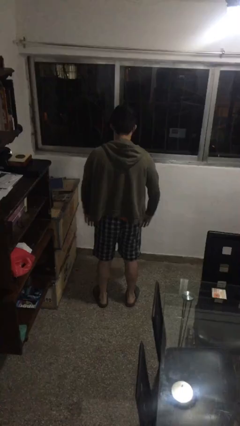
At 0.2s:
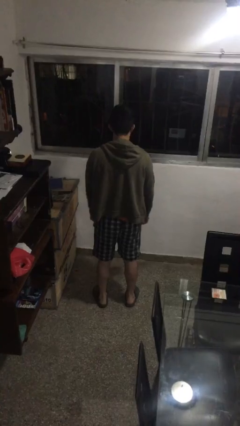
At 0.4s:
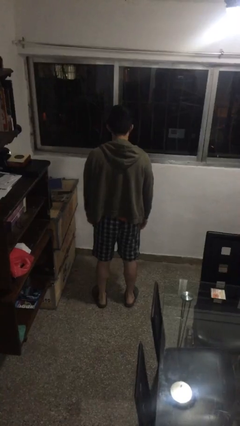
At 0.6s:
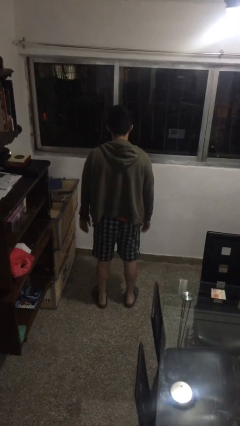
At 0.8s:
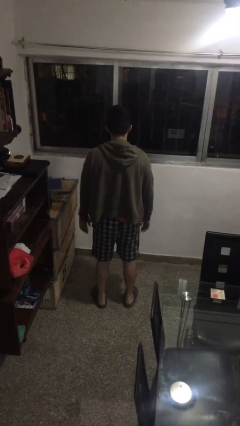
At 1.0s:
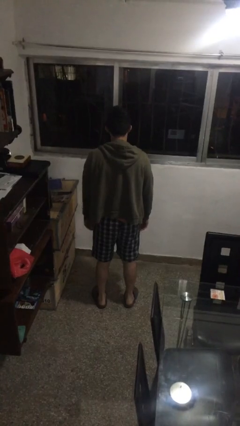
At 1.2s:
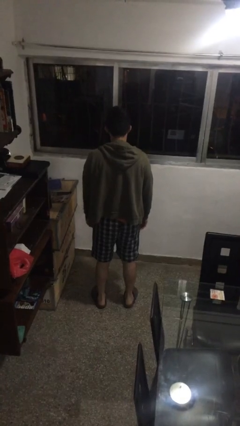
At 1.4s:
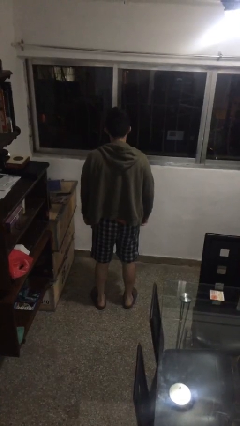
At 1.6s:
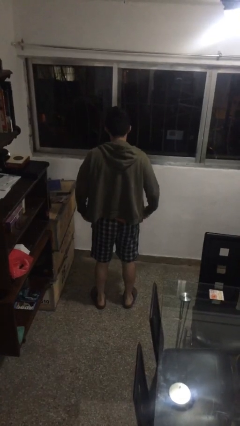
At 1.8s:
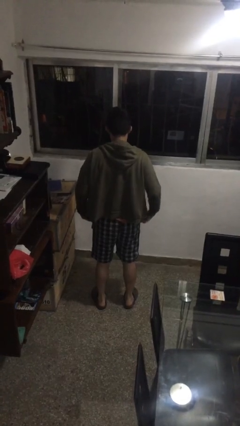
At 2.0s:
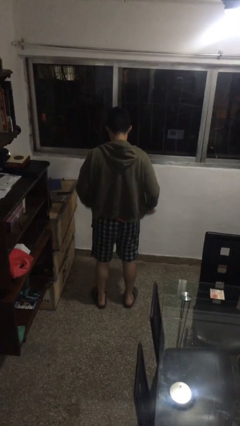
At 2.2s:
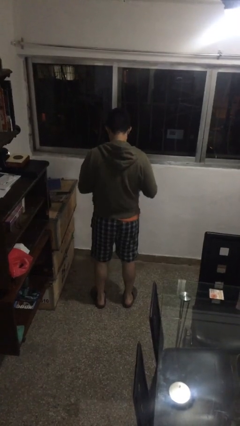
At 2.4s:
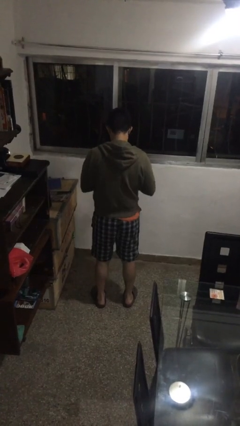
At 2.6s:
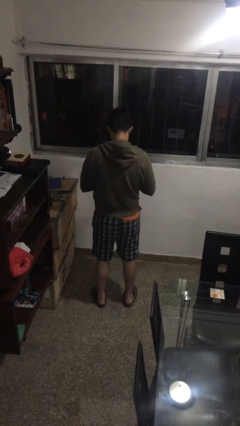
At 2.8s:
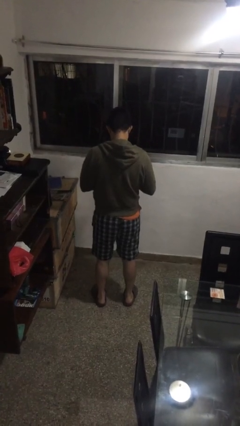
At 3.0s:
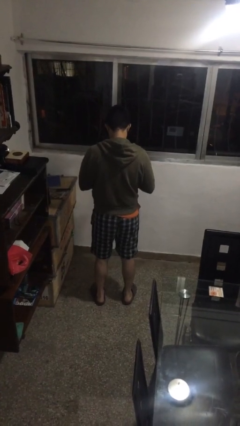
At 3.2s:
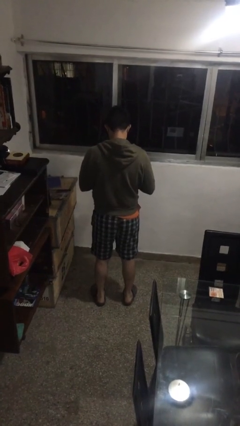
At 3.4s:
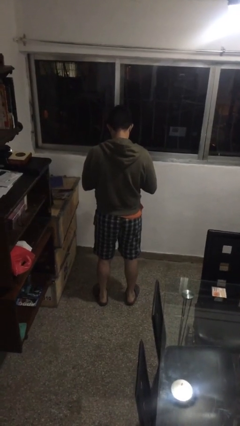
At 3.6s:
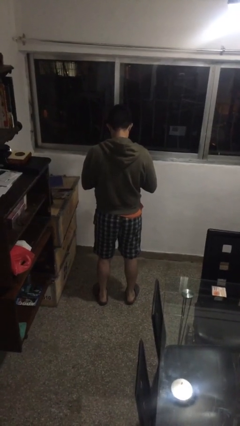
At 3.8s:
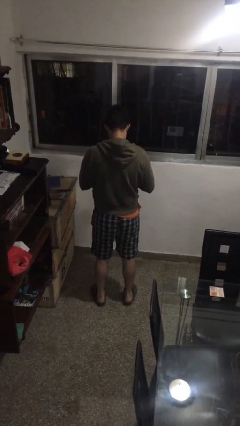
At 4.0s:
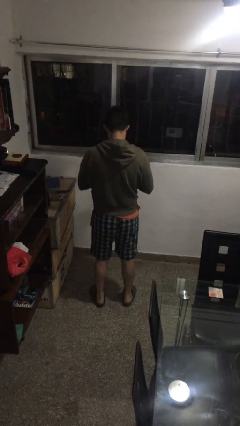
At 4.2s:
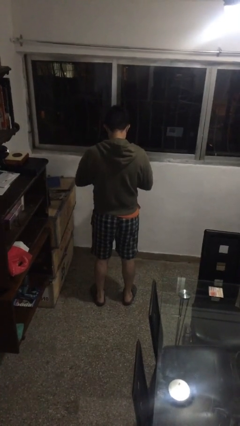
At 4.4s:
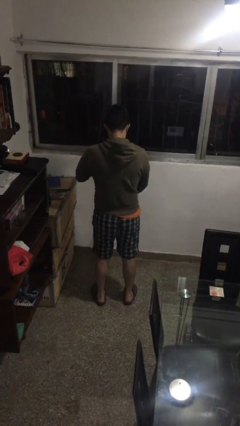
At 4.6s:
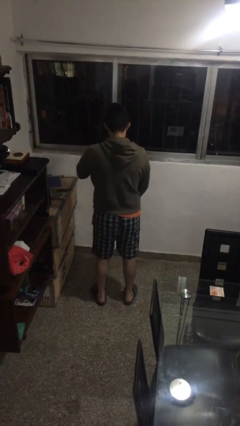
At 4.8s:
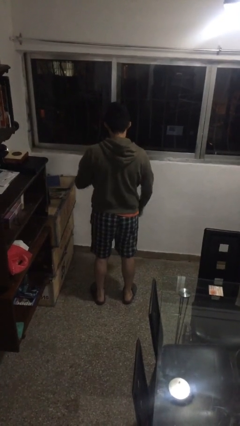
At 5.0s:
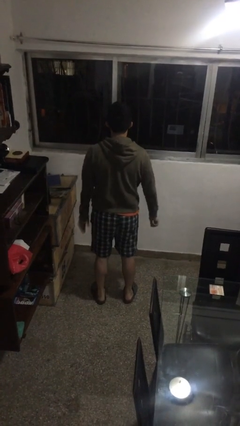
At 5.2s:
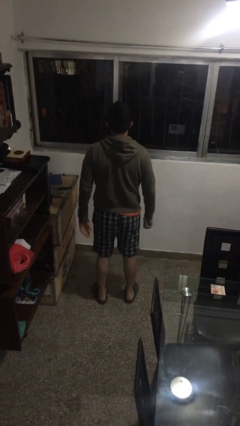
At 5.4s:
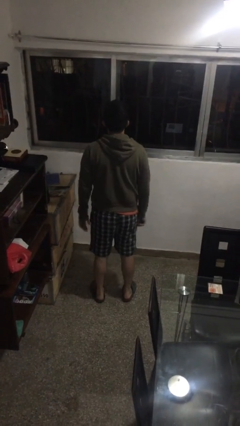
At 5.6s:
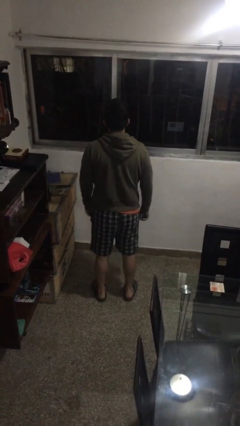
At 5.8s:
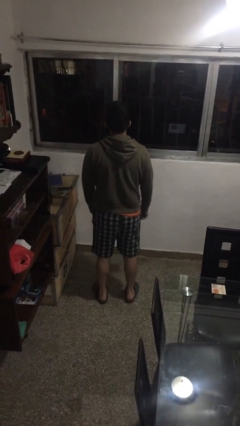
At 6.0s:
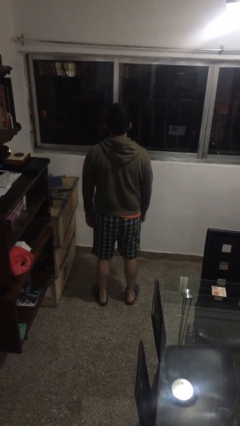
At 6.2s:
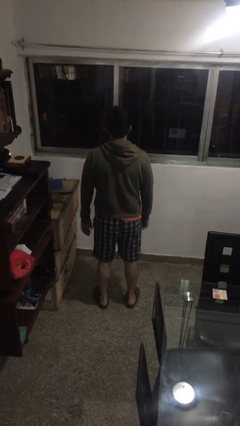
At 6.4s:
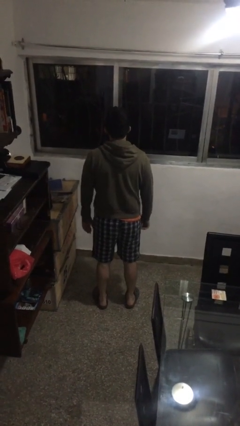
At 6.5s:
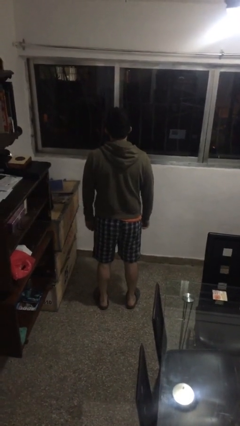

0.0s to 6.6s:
person zips up jacket

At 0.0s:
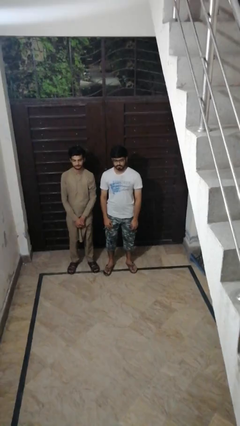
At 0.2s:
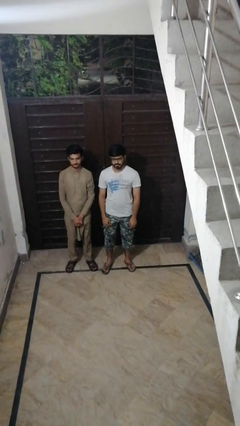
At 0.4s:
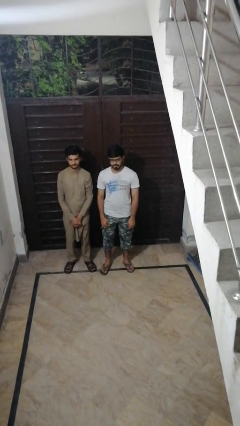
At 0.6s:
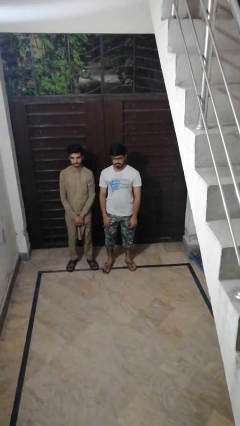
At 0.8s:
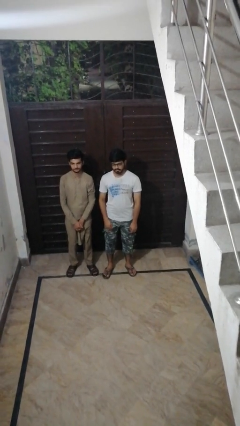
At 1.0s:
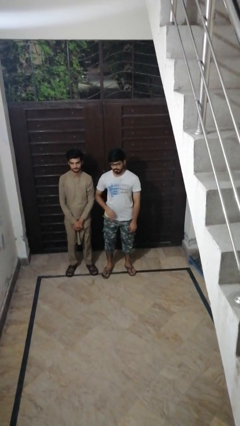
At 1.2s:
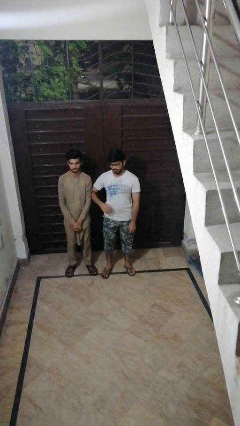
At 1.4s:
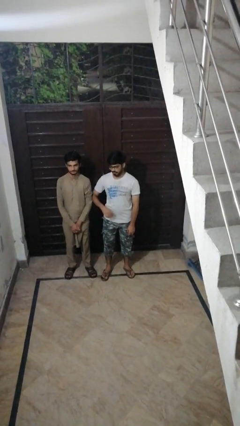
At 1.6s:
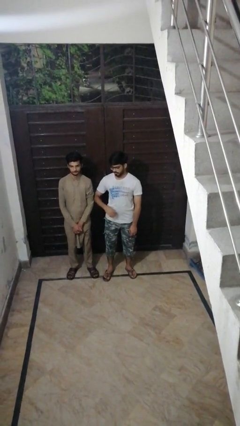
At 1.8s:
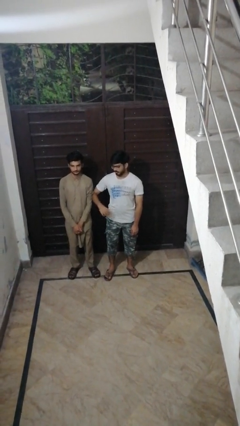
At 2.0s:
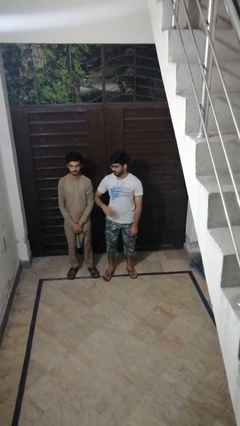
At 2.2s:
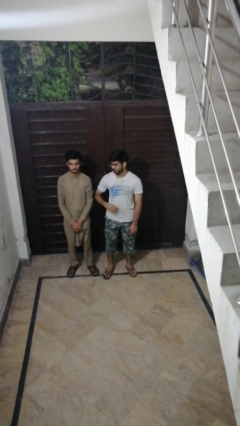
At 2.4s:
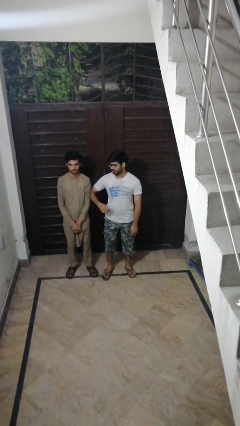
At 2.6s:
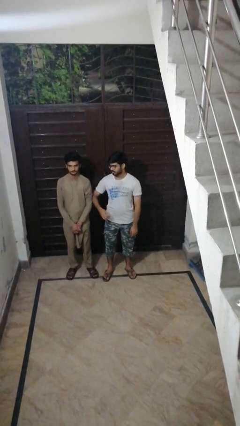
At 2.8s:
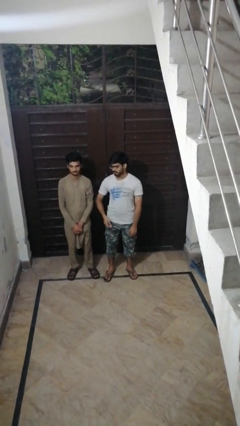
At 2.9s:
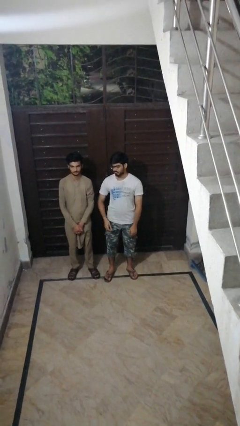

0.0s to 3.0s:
person nudges person with elbow

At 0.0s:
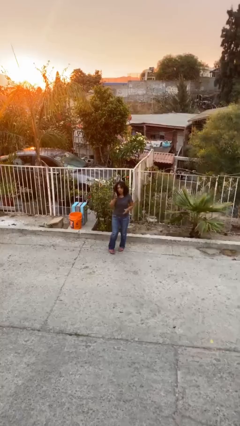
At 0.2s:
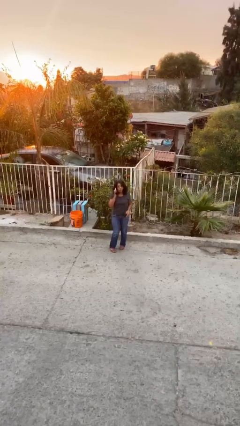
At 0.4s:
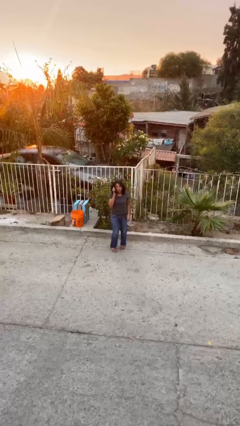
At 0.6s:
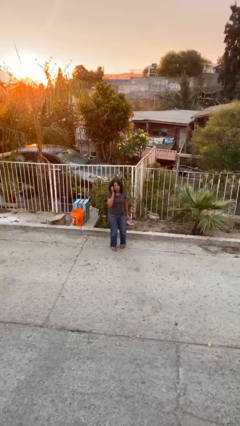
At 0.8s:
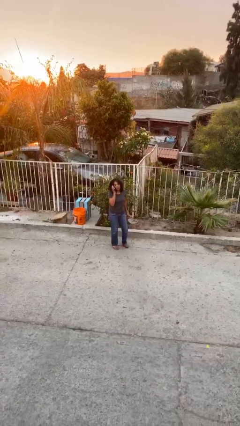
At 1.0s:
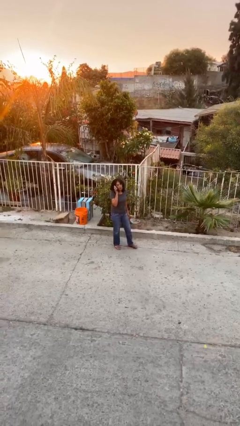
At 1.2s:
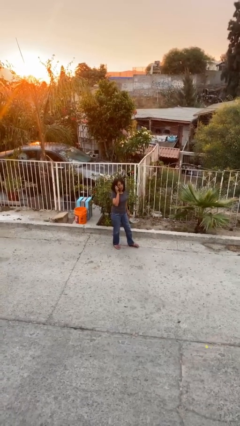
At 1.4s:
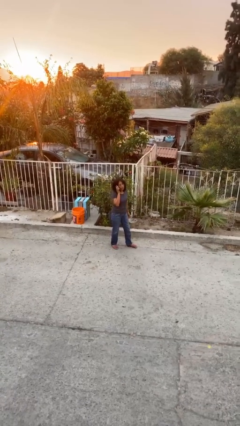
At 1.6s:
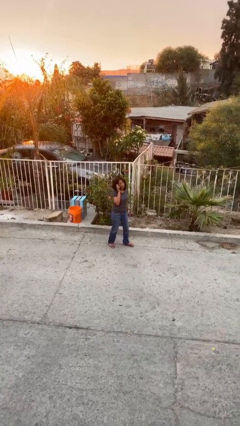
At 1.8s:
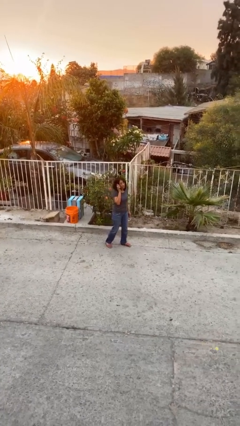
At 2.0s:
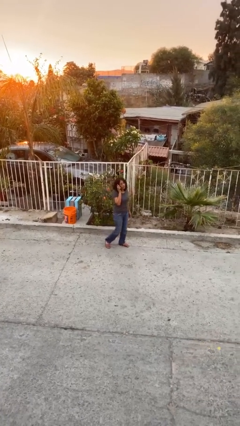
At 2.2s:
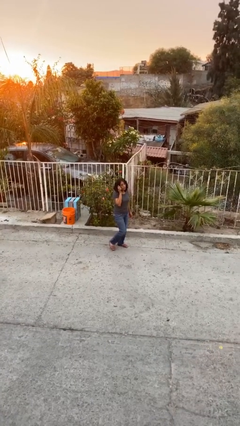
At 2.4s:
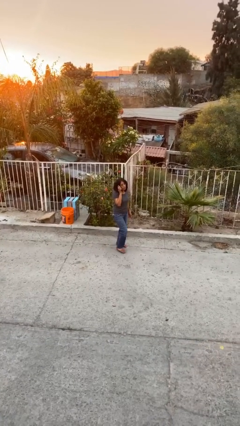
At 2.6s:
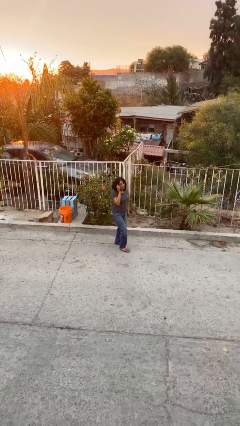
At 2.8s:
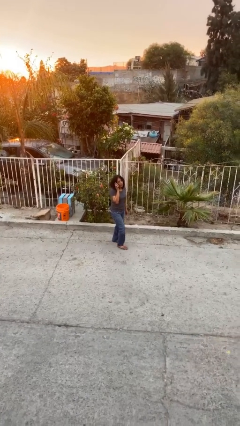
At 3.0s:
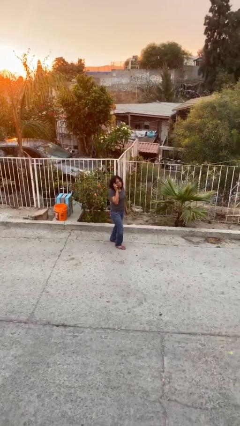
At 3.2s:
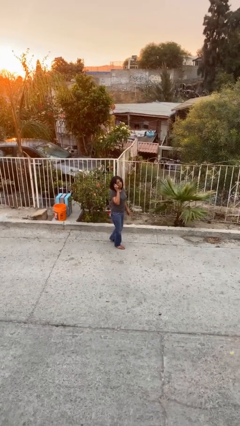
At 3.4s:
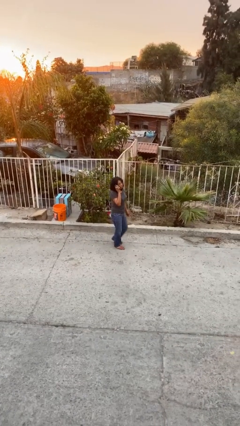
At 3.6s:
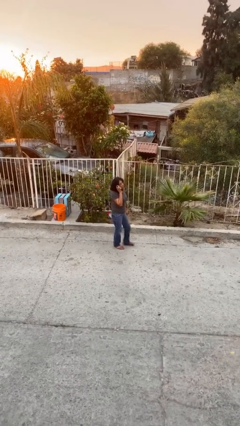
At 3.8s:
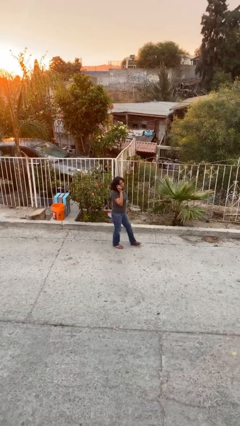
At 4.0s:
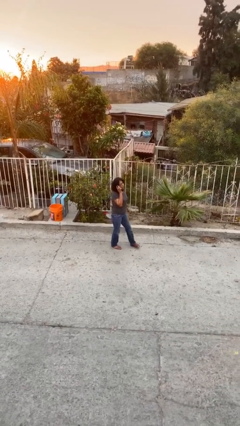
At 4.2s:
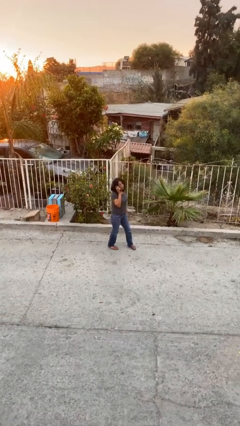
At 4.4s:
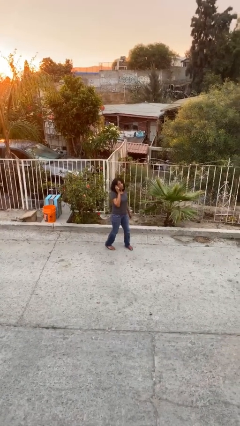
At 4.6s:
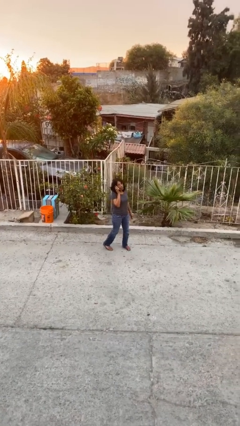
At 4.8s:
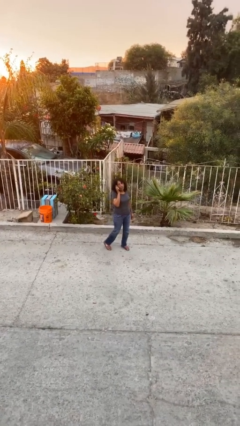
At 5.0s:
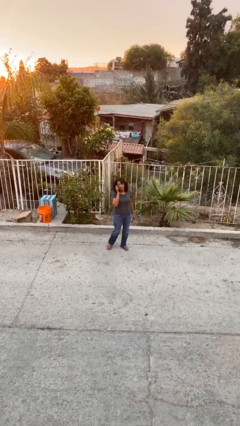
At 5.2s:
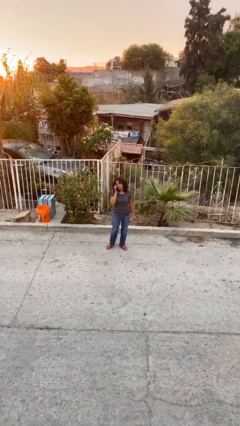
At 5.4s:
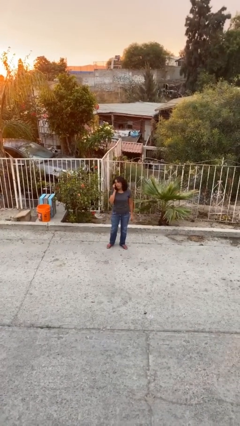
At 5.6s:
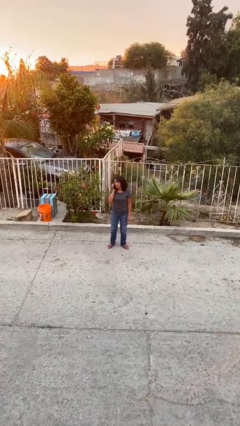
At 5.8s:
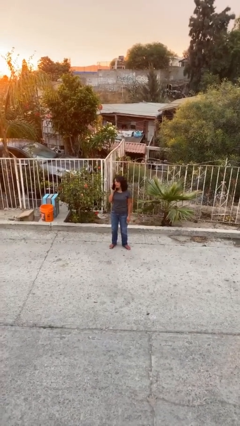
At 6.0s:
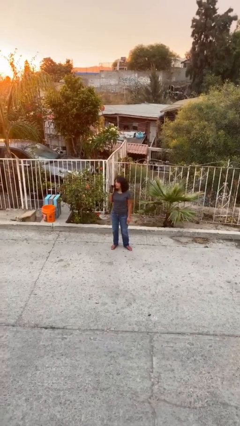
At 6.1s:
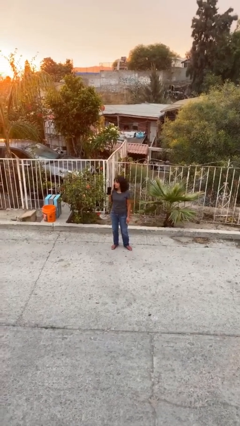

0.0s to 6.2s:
person talks on phone

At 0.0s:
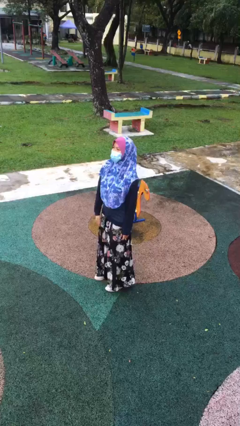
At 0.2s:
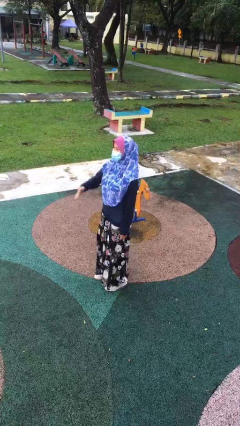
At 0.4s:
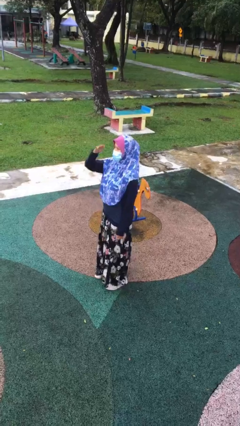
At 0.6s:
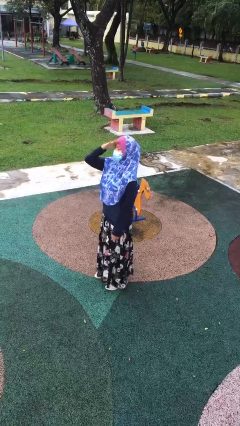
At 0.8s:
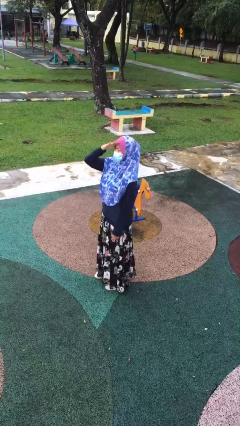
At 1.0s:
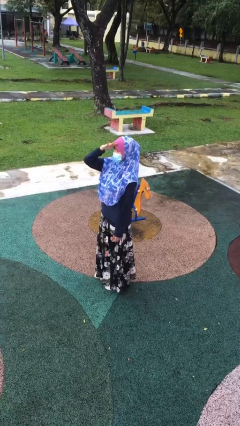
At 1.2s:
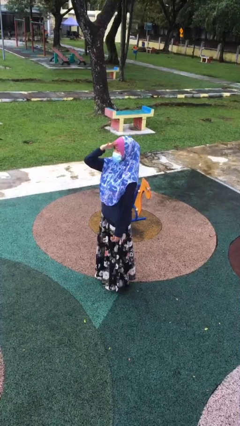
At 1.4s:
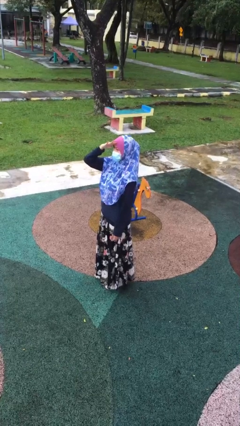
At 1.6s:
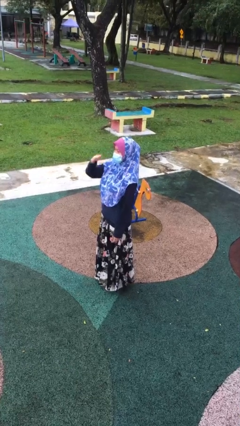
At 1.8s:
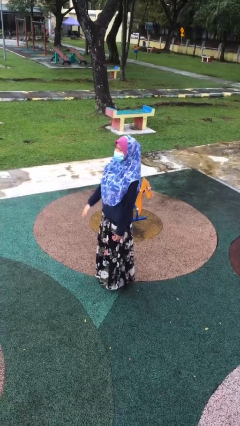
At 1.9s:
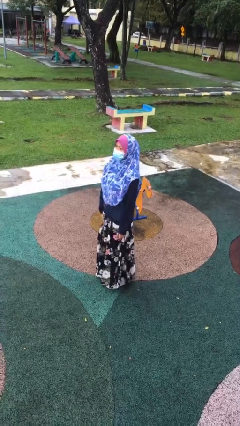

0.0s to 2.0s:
person salutes
